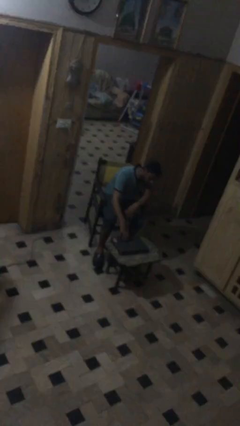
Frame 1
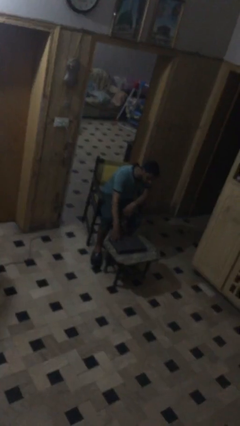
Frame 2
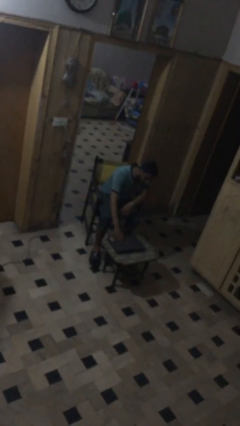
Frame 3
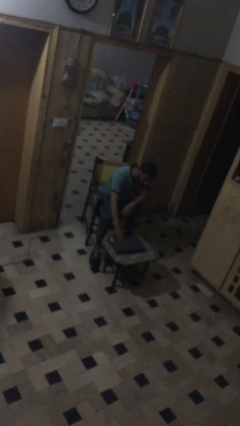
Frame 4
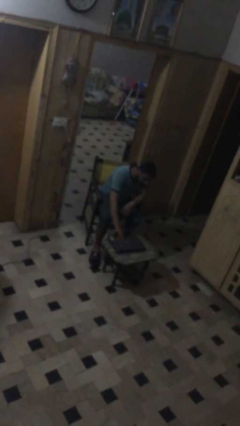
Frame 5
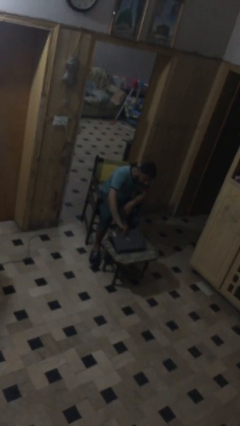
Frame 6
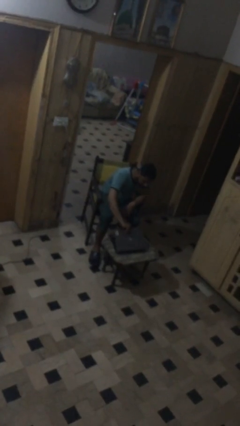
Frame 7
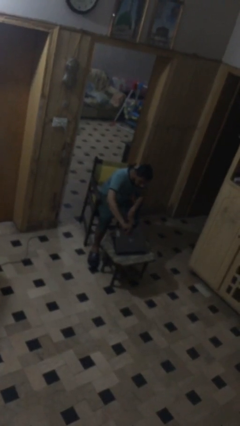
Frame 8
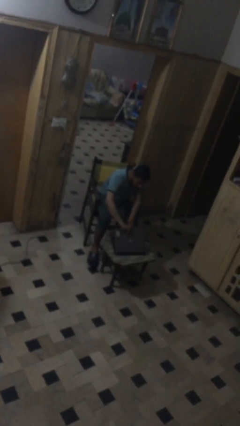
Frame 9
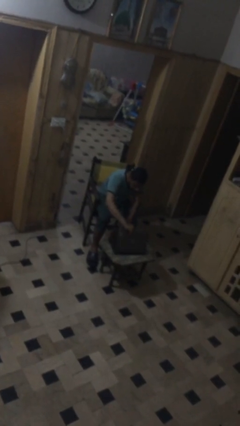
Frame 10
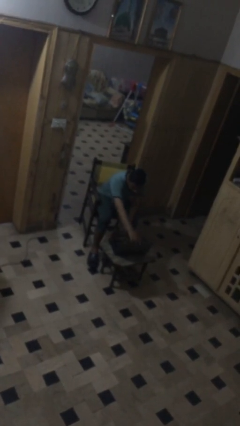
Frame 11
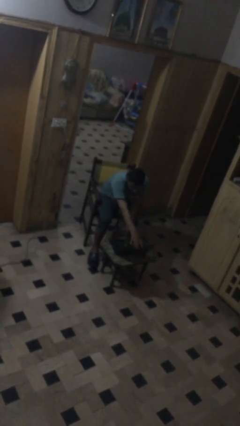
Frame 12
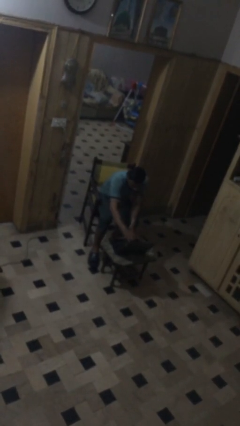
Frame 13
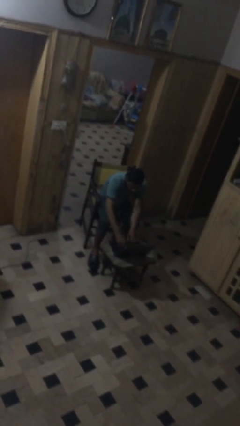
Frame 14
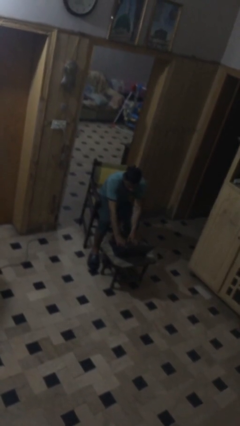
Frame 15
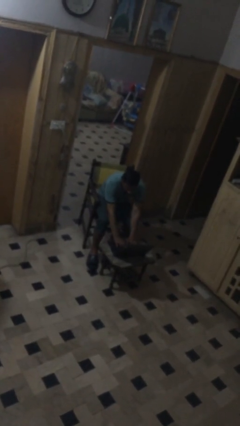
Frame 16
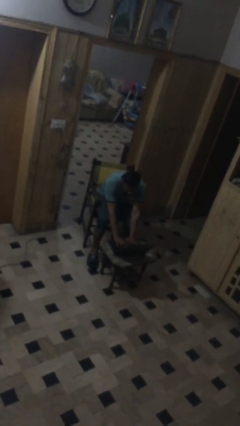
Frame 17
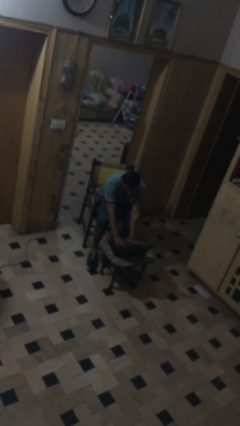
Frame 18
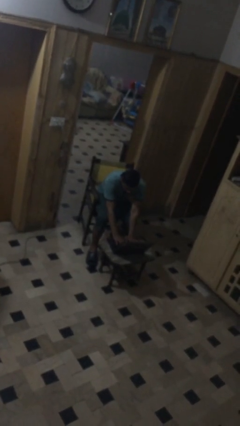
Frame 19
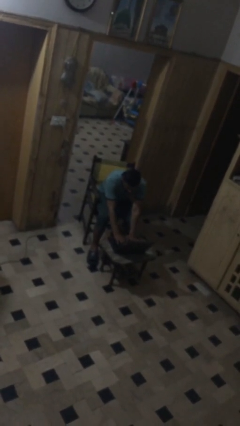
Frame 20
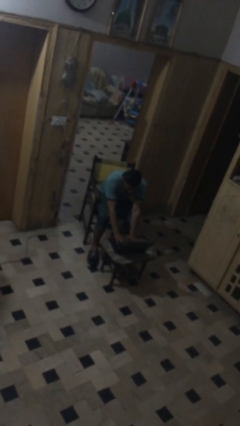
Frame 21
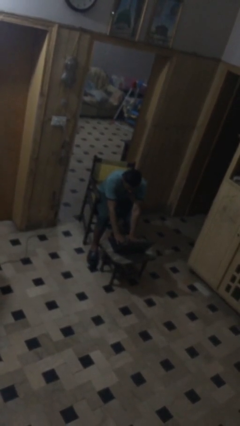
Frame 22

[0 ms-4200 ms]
person interacts with laptop

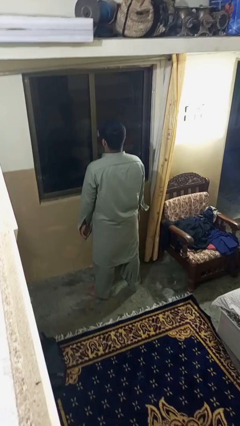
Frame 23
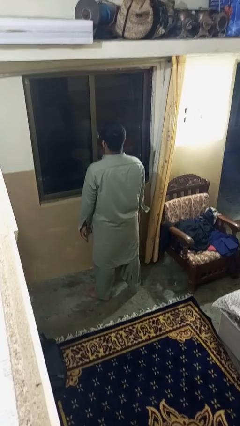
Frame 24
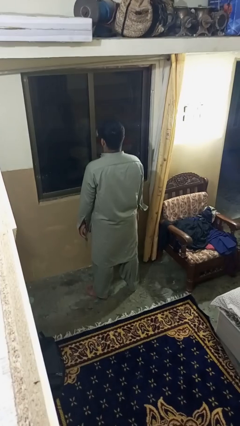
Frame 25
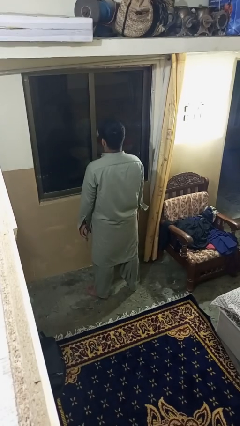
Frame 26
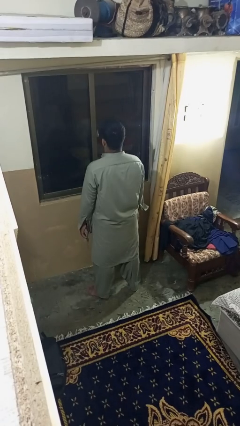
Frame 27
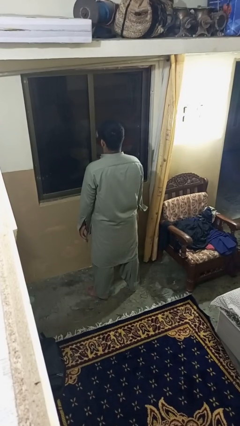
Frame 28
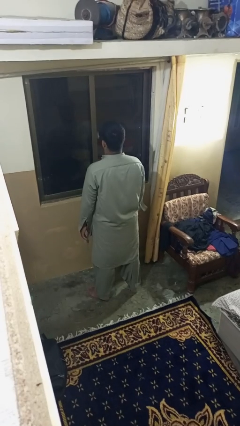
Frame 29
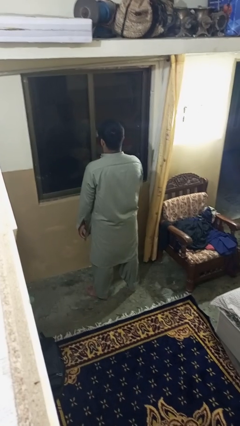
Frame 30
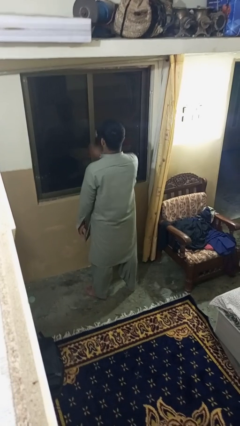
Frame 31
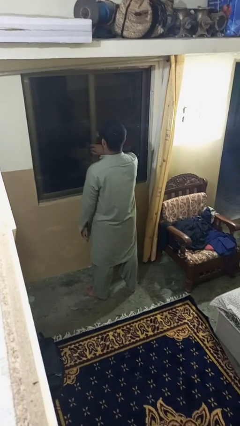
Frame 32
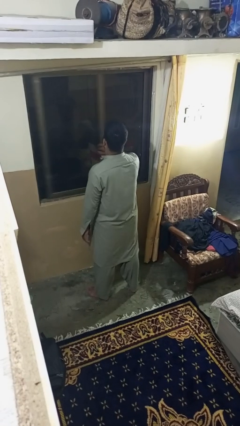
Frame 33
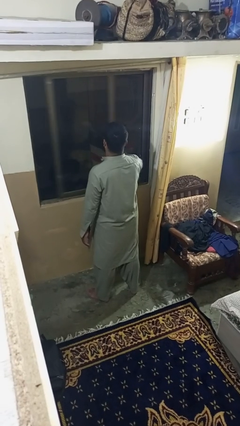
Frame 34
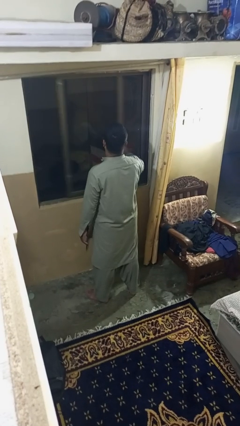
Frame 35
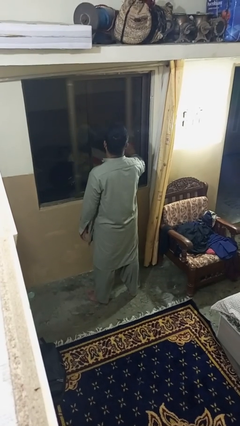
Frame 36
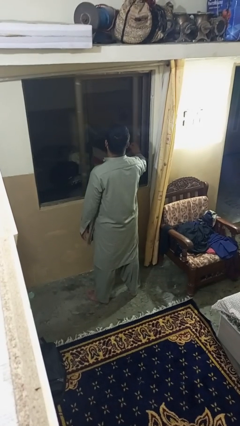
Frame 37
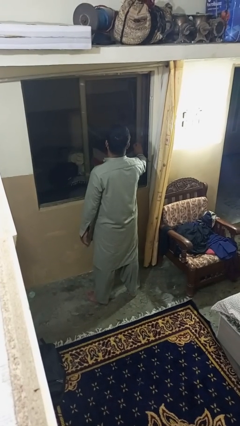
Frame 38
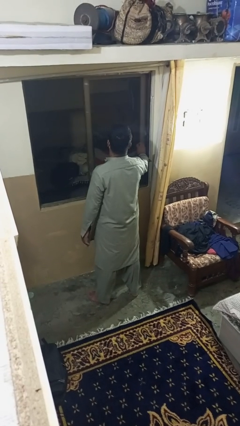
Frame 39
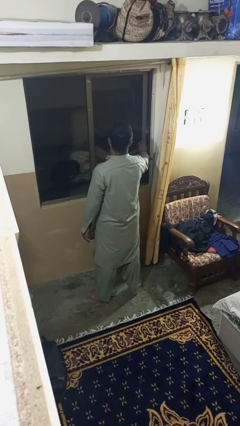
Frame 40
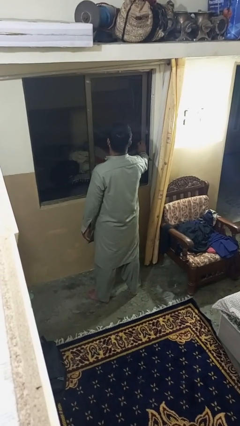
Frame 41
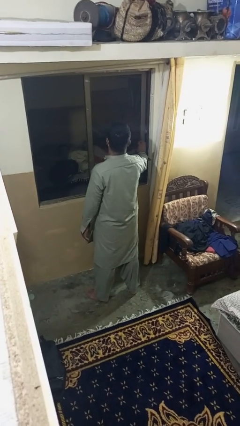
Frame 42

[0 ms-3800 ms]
person opens home window

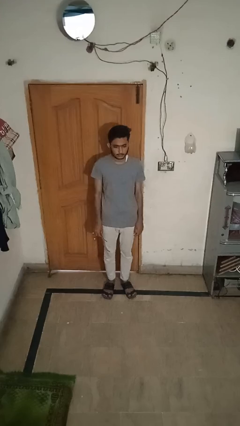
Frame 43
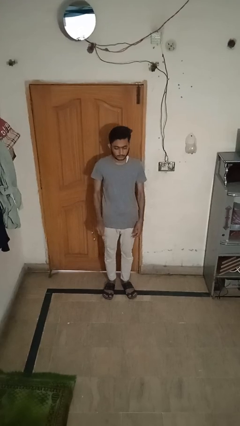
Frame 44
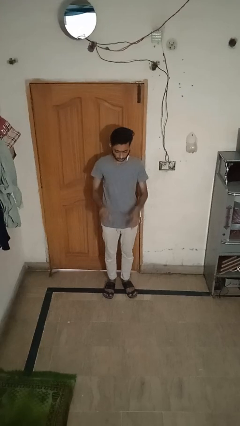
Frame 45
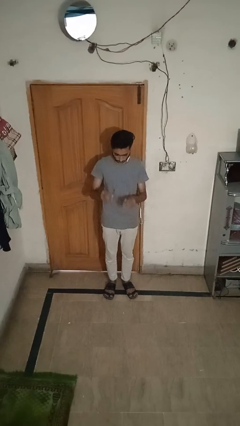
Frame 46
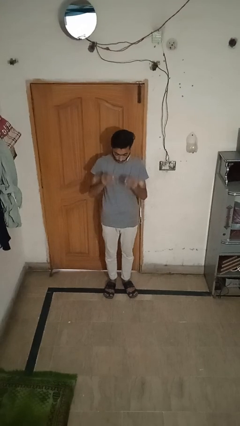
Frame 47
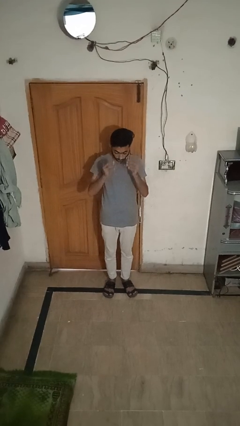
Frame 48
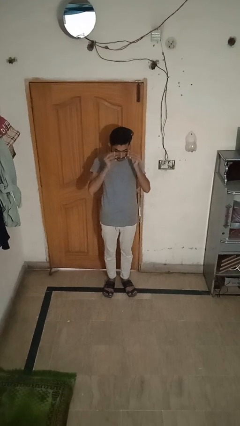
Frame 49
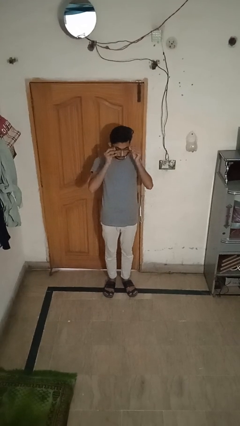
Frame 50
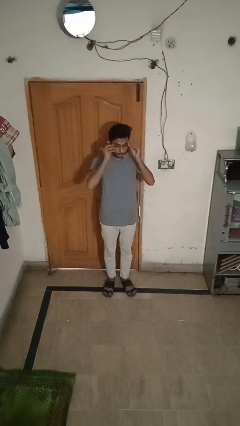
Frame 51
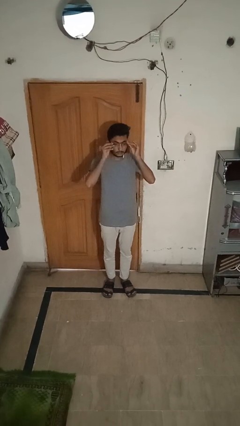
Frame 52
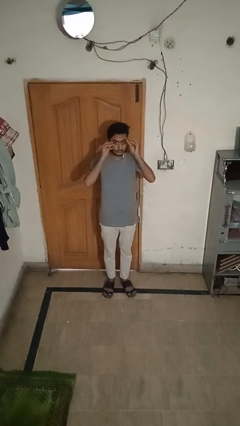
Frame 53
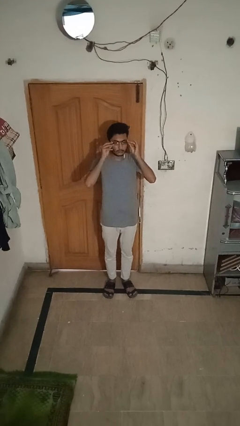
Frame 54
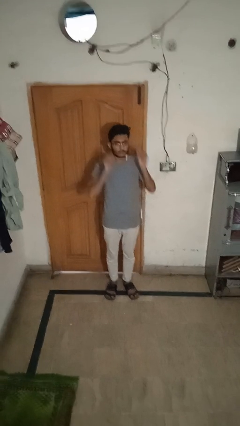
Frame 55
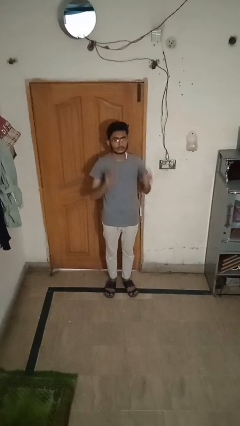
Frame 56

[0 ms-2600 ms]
person puts on glasses

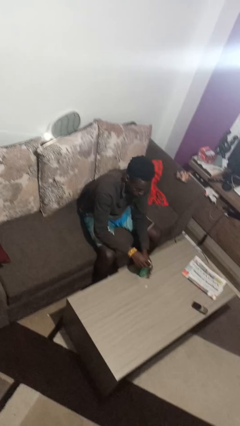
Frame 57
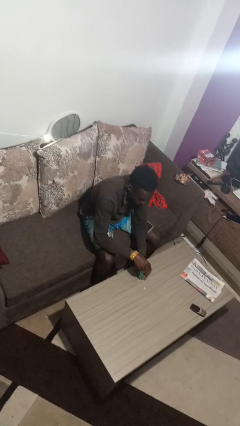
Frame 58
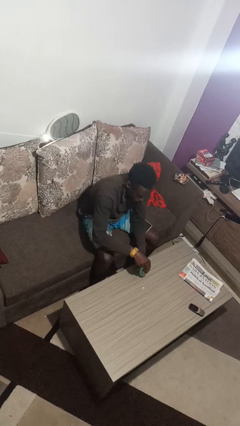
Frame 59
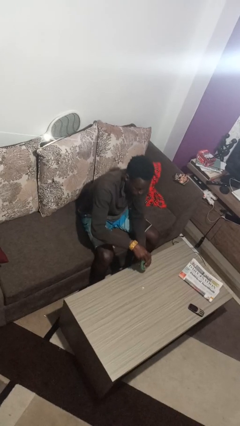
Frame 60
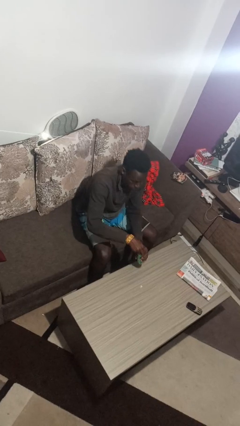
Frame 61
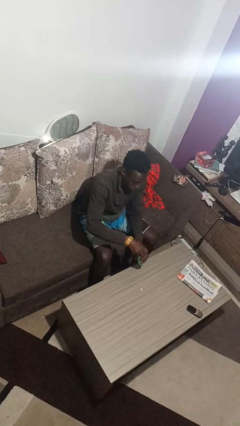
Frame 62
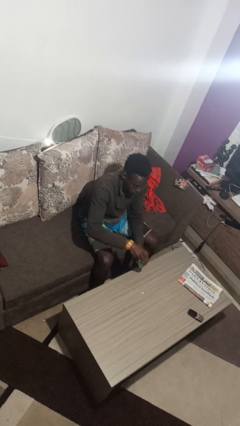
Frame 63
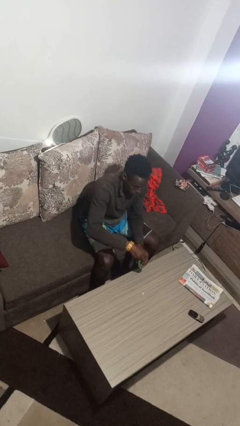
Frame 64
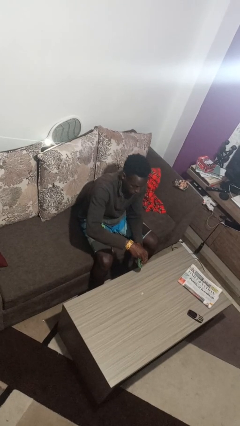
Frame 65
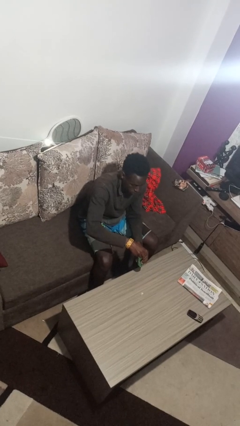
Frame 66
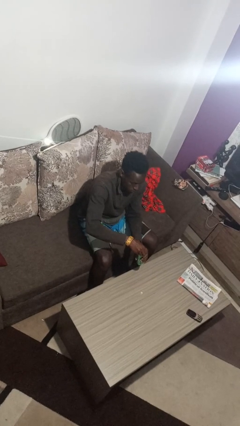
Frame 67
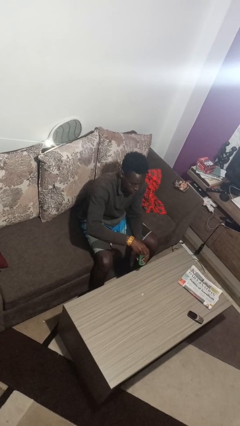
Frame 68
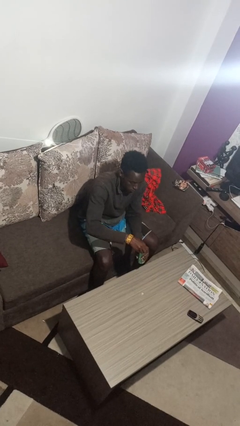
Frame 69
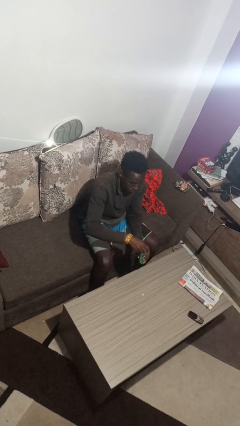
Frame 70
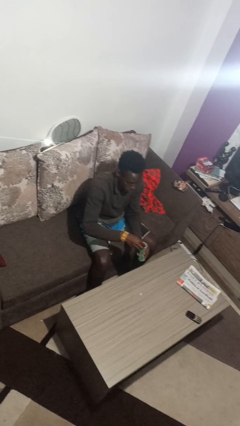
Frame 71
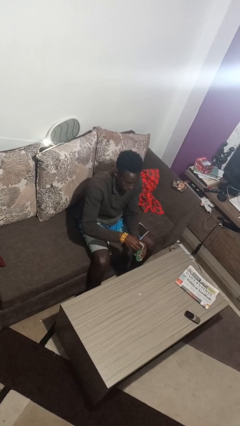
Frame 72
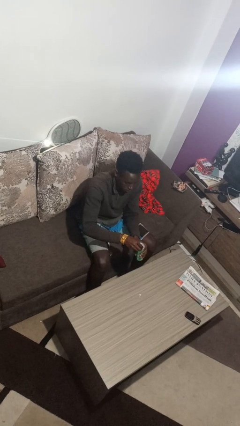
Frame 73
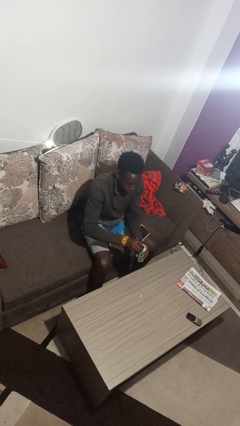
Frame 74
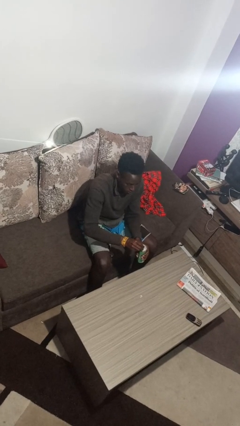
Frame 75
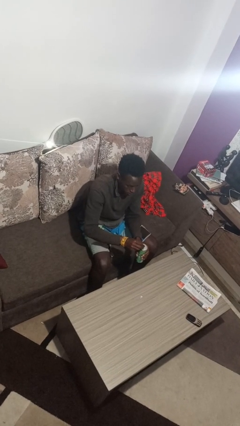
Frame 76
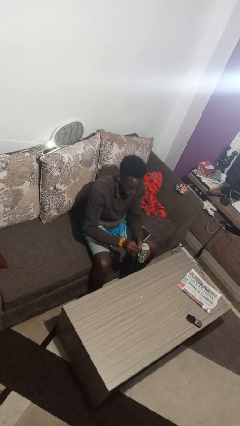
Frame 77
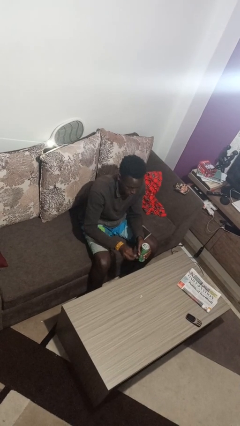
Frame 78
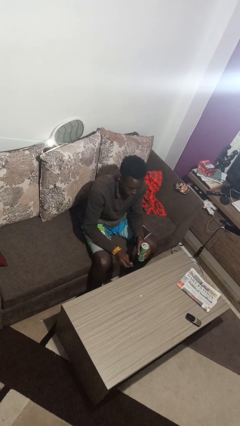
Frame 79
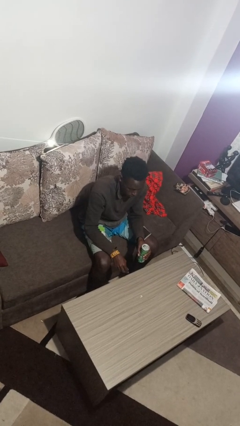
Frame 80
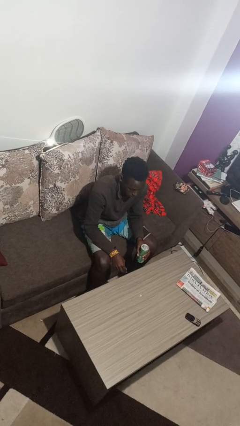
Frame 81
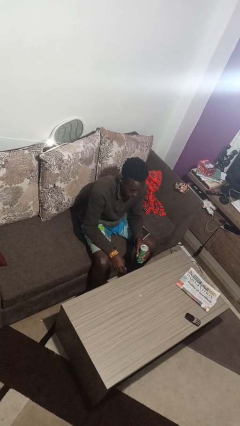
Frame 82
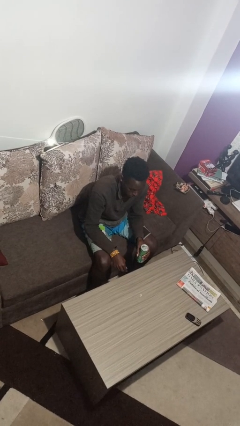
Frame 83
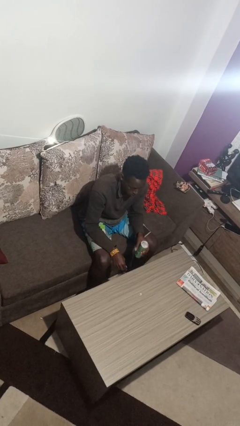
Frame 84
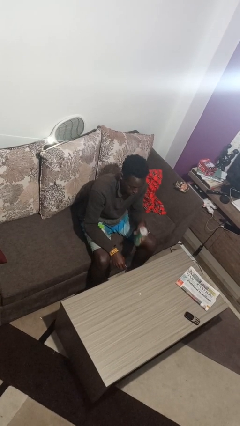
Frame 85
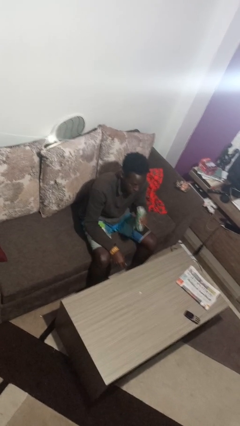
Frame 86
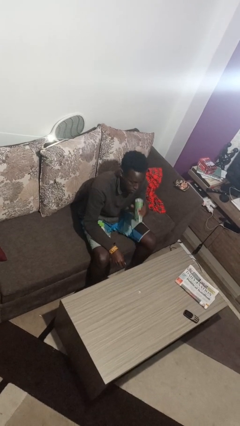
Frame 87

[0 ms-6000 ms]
person opens beverage can

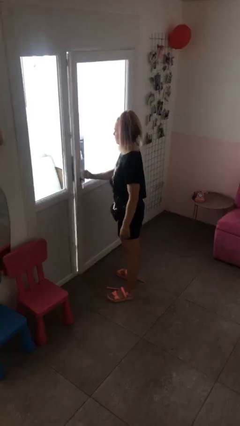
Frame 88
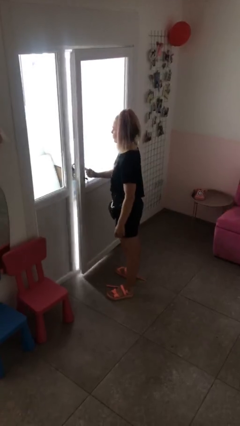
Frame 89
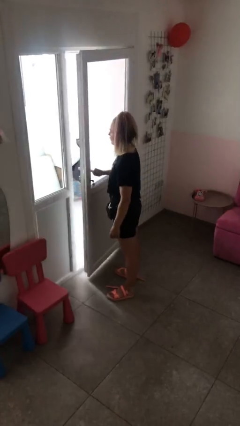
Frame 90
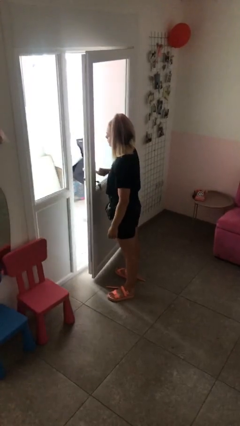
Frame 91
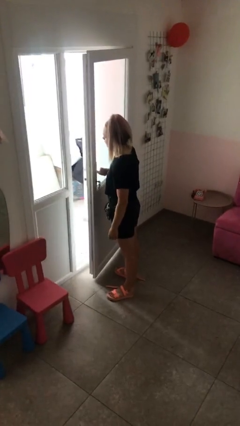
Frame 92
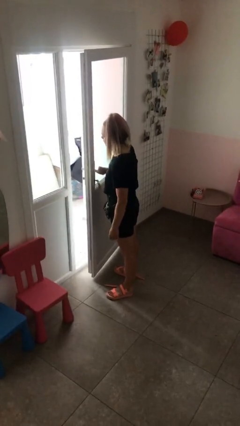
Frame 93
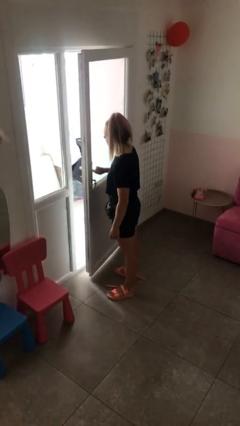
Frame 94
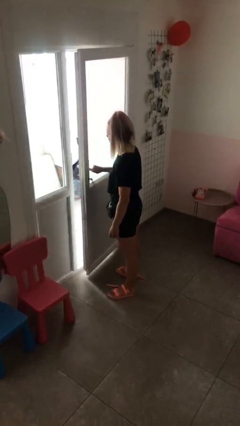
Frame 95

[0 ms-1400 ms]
person opens facility door
